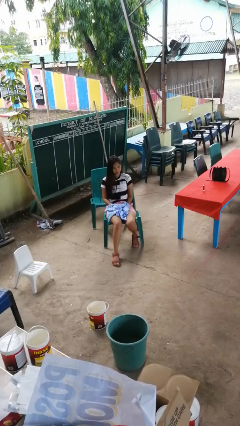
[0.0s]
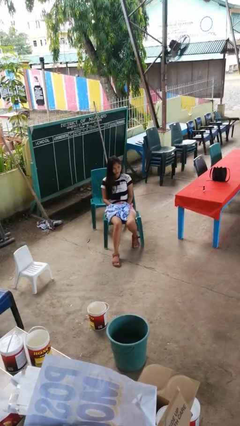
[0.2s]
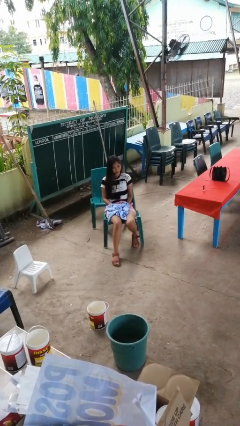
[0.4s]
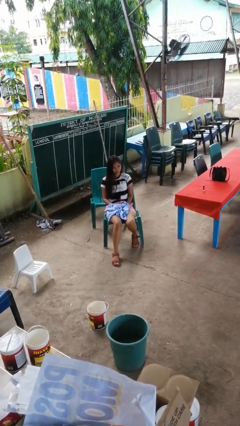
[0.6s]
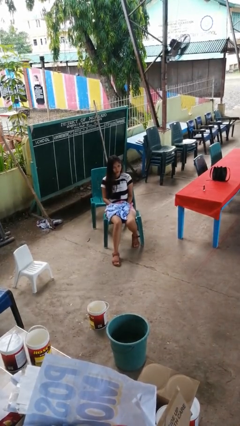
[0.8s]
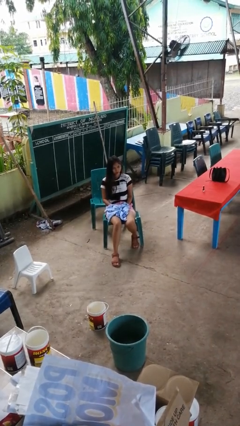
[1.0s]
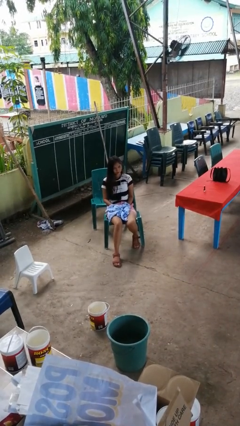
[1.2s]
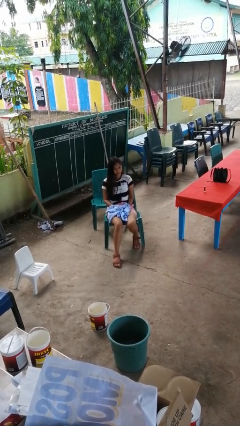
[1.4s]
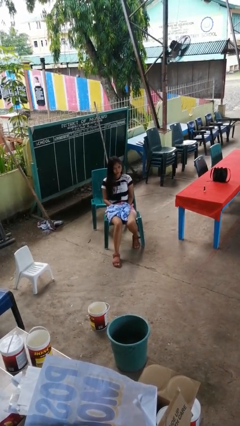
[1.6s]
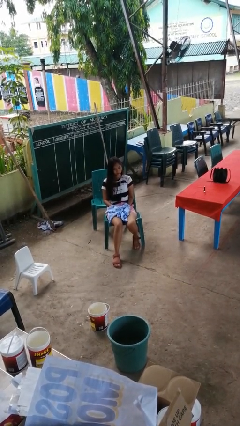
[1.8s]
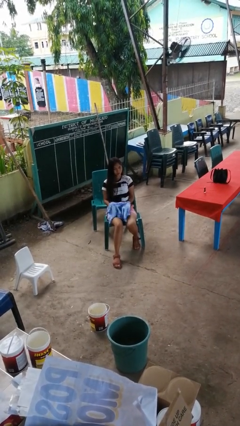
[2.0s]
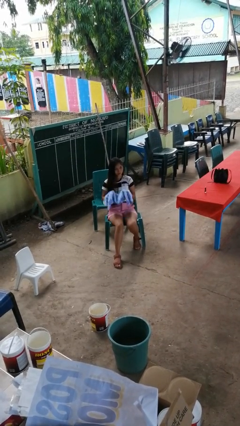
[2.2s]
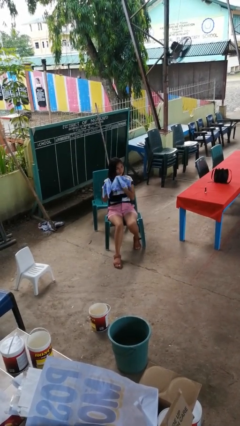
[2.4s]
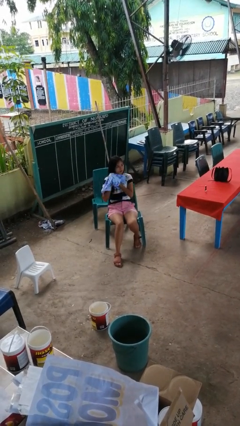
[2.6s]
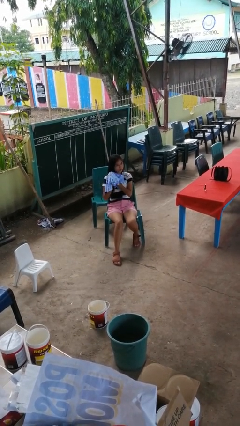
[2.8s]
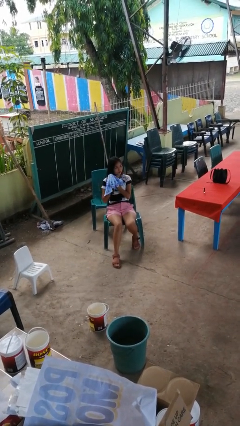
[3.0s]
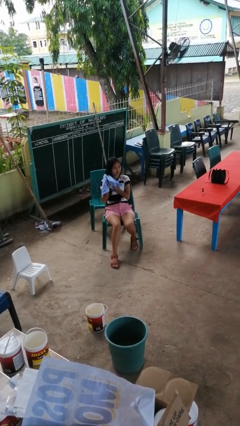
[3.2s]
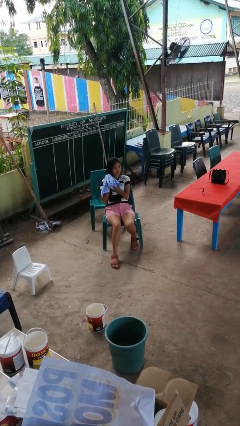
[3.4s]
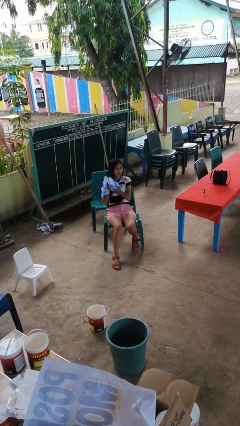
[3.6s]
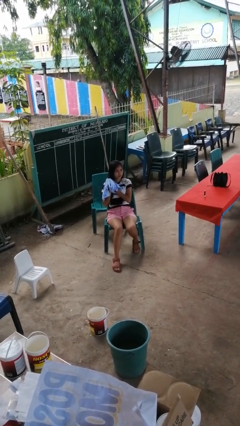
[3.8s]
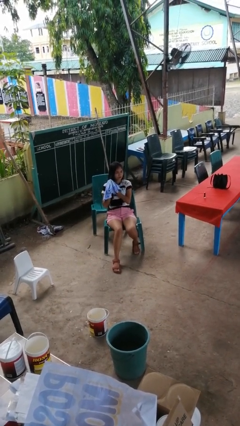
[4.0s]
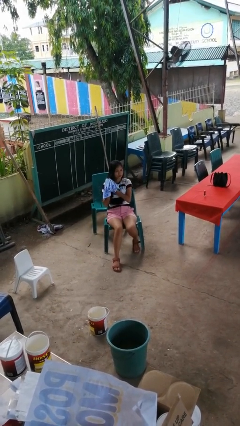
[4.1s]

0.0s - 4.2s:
person dries hair with towel

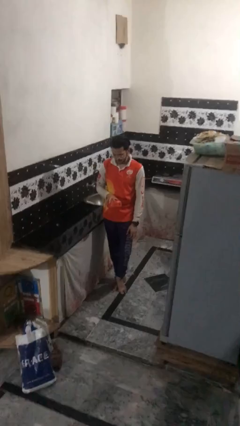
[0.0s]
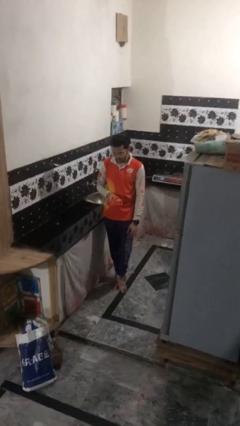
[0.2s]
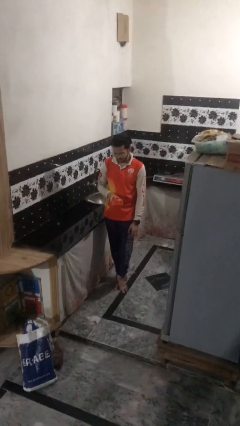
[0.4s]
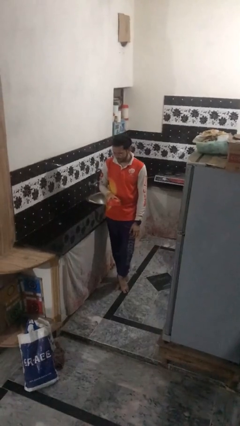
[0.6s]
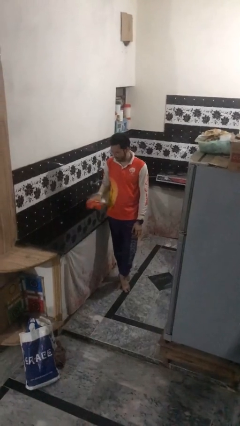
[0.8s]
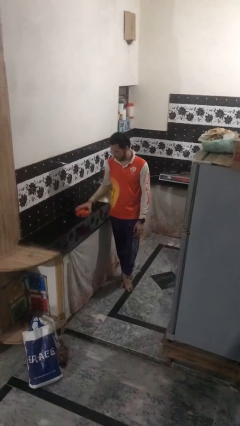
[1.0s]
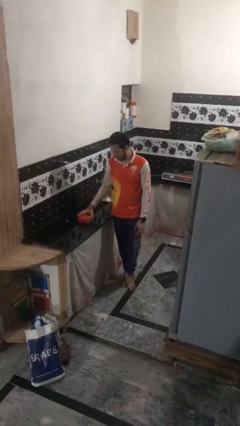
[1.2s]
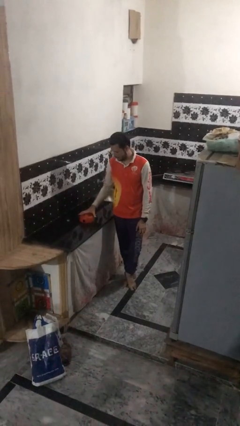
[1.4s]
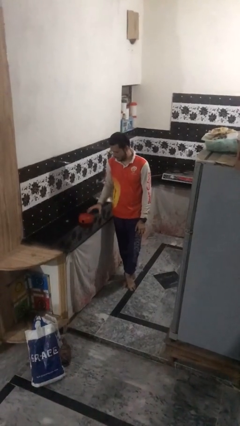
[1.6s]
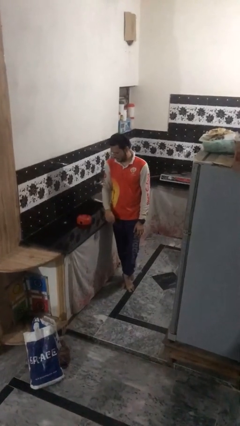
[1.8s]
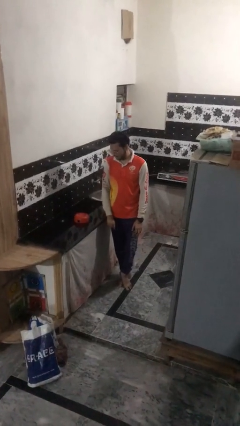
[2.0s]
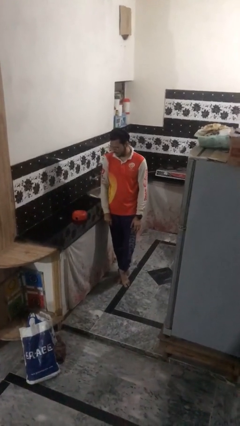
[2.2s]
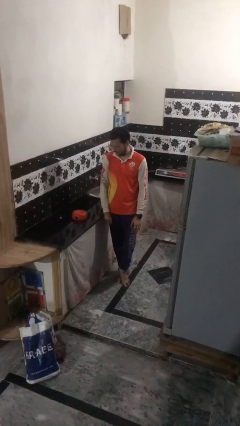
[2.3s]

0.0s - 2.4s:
person puts down object on countertop

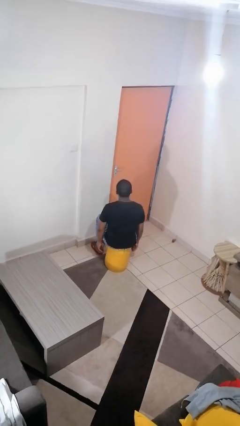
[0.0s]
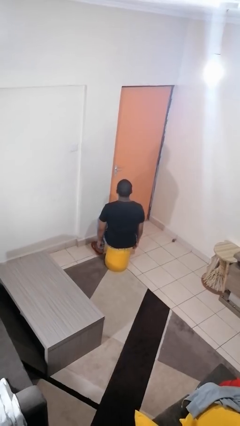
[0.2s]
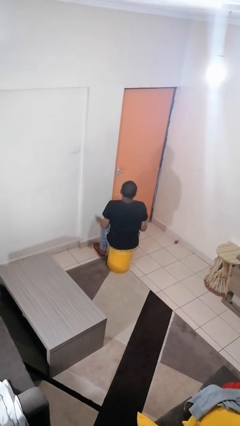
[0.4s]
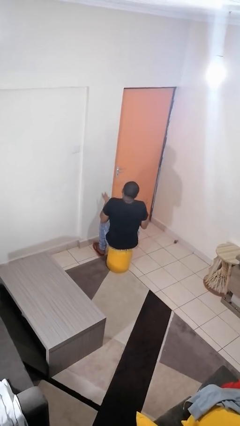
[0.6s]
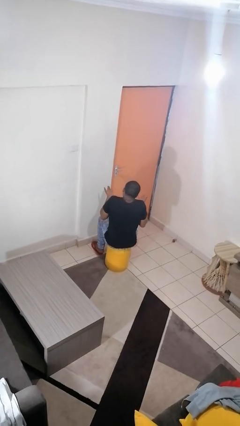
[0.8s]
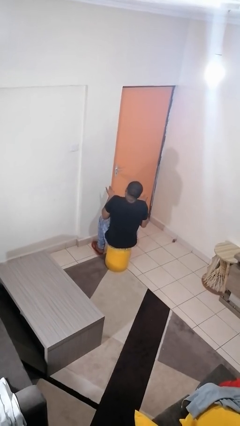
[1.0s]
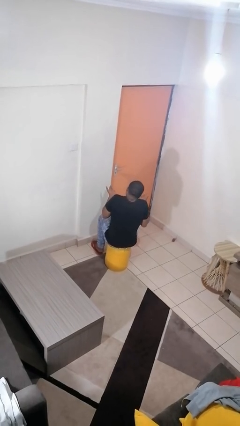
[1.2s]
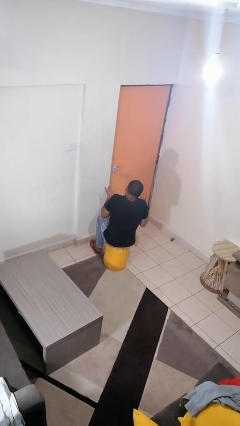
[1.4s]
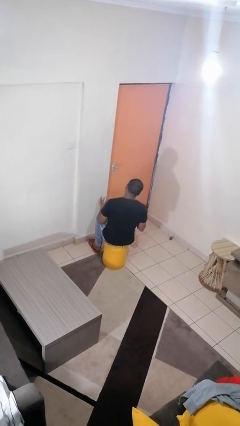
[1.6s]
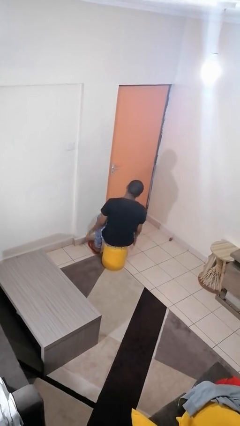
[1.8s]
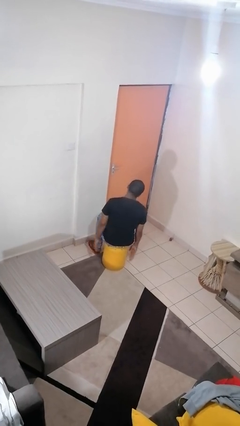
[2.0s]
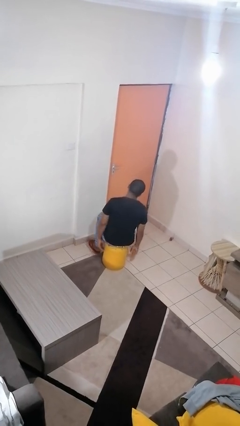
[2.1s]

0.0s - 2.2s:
person shrugs

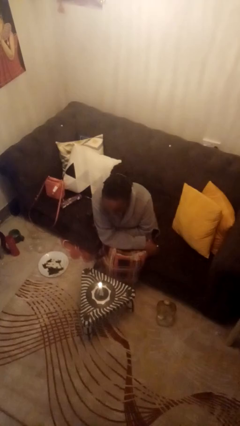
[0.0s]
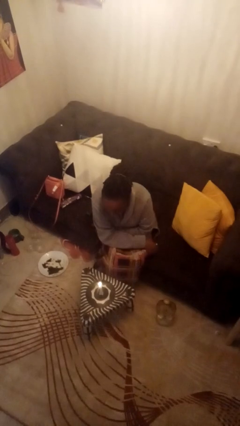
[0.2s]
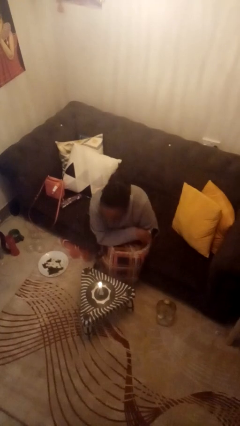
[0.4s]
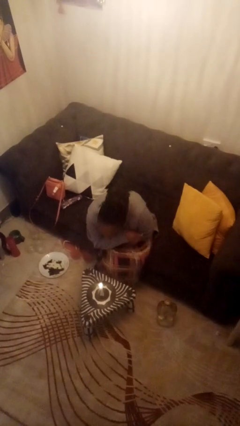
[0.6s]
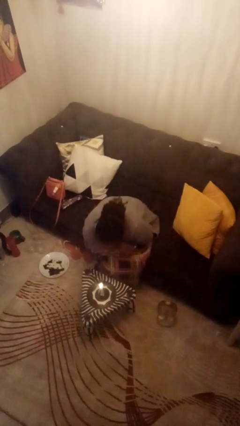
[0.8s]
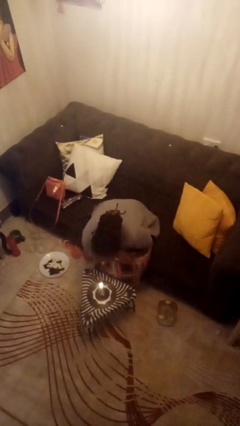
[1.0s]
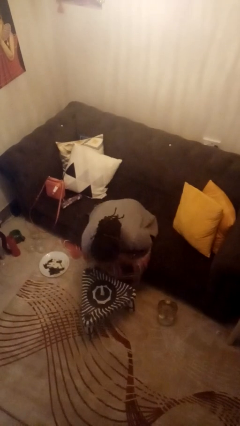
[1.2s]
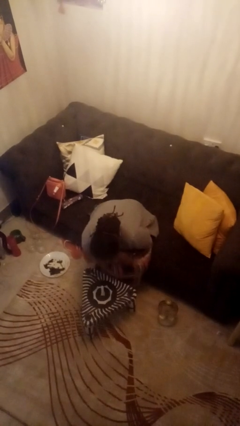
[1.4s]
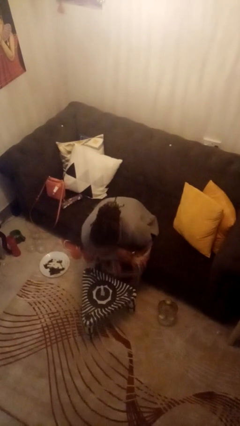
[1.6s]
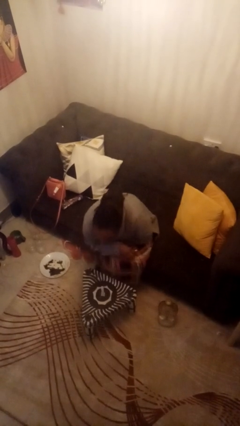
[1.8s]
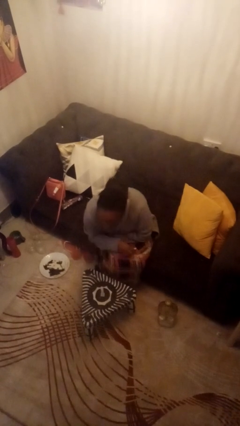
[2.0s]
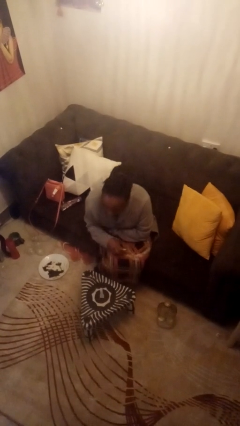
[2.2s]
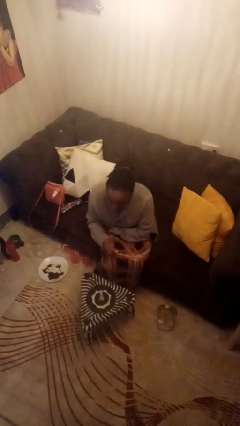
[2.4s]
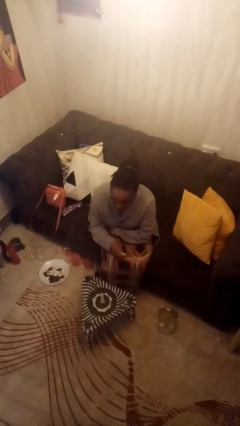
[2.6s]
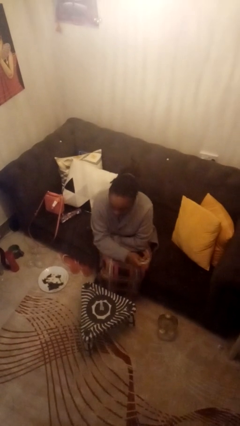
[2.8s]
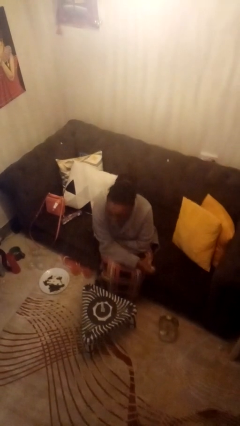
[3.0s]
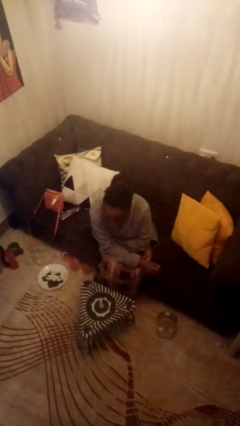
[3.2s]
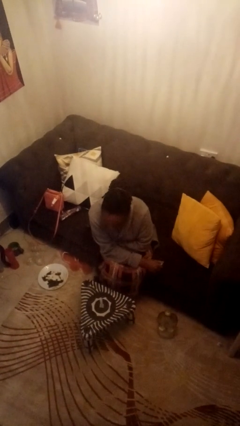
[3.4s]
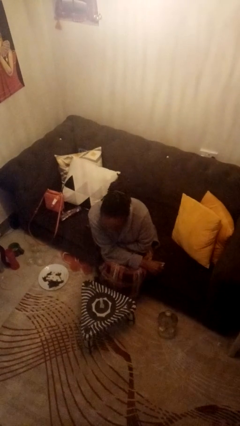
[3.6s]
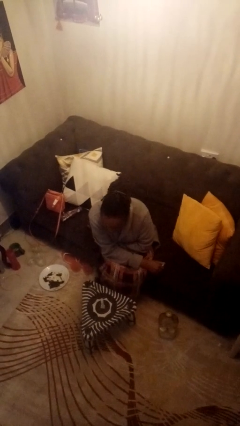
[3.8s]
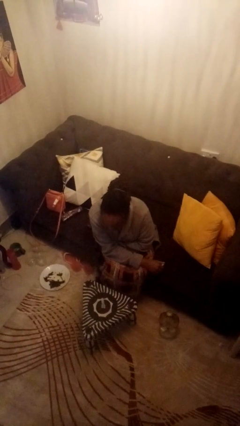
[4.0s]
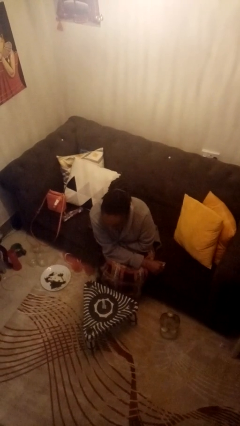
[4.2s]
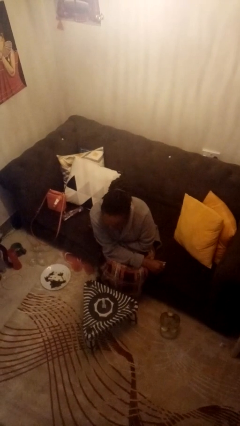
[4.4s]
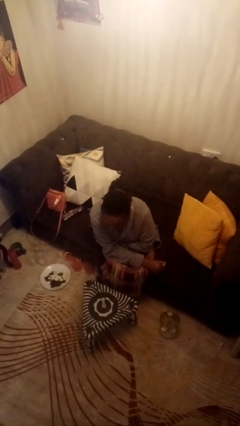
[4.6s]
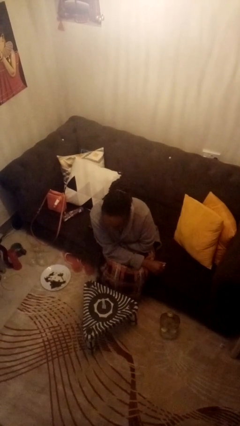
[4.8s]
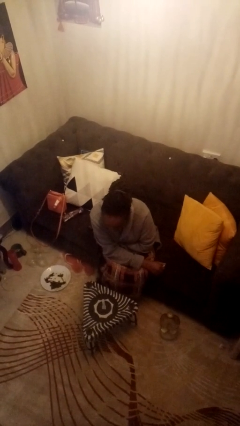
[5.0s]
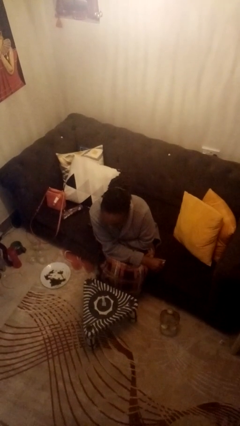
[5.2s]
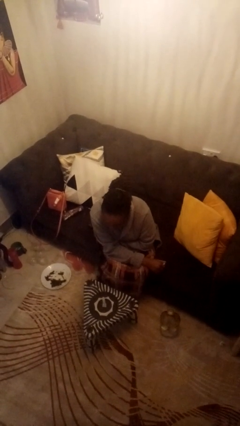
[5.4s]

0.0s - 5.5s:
person extinguishes candle

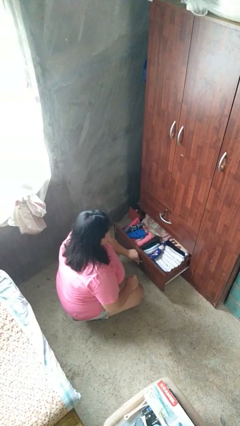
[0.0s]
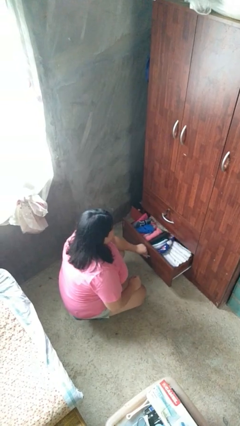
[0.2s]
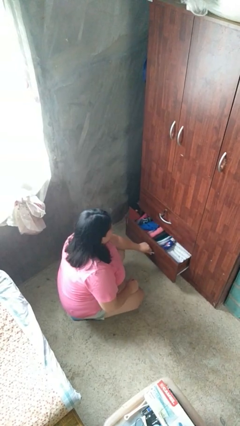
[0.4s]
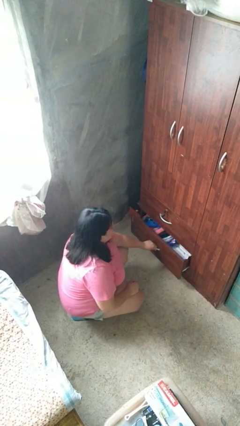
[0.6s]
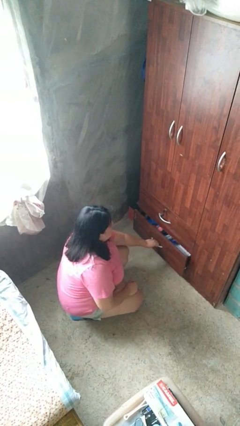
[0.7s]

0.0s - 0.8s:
person closes dresser drawer

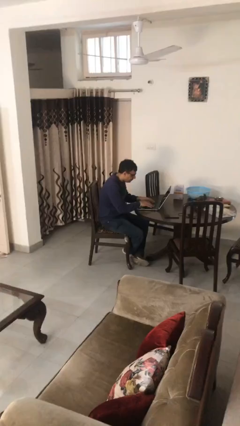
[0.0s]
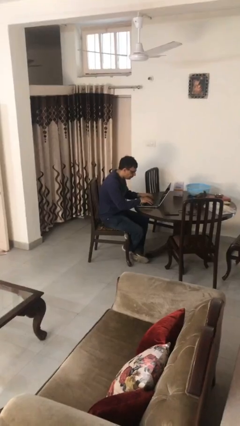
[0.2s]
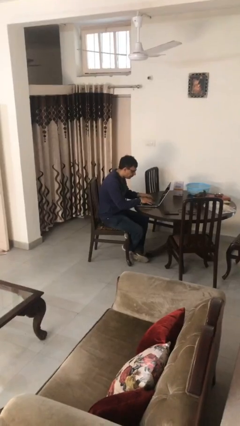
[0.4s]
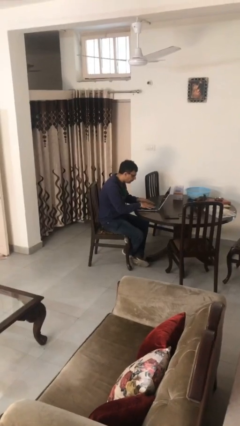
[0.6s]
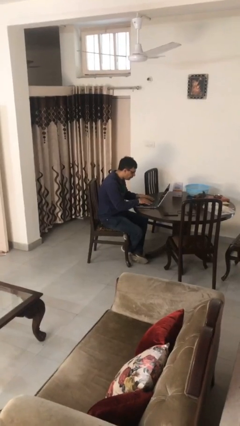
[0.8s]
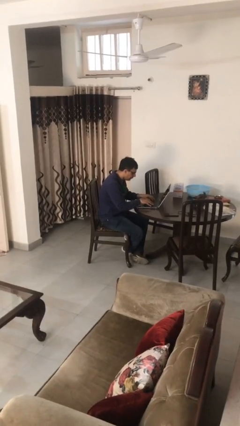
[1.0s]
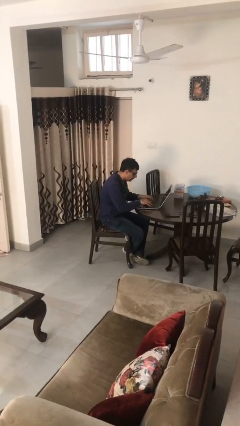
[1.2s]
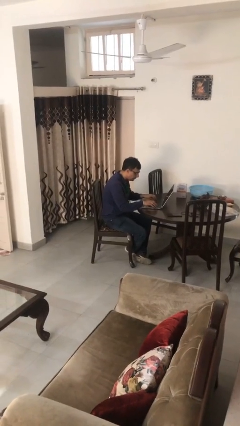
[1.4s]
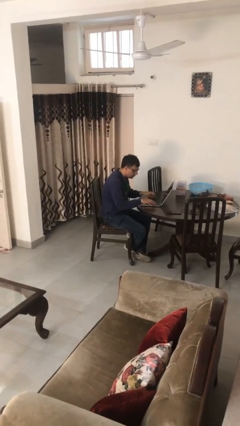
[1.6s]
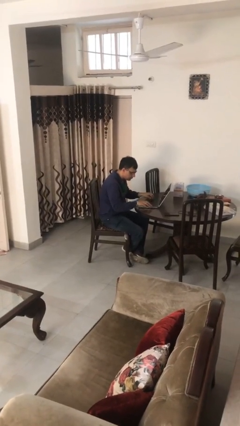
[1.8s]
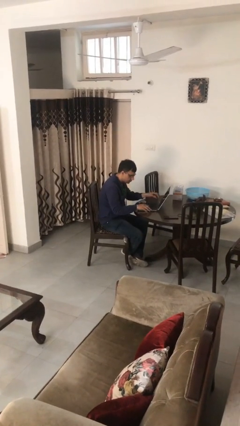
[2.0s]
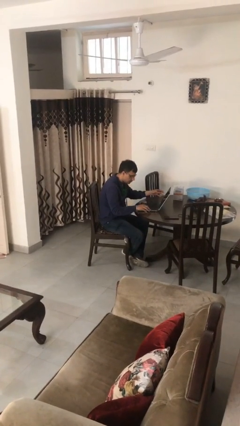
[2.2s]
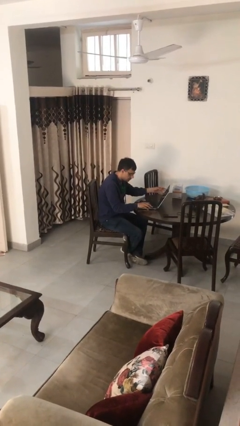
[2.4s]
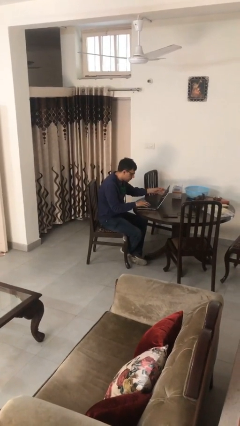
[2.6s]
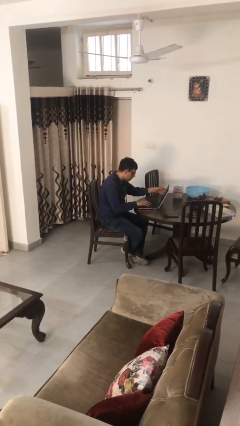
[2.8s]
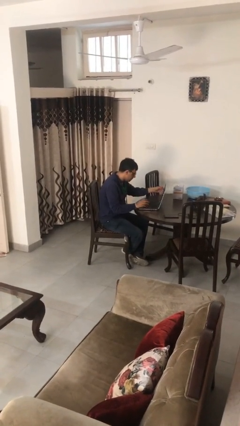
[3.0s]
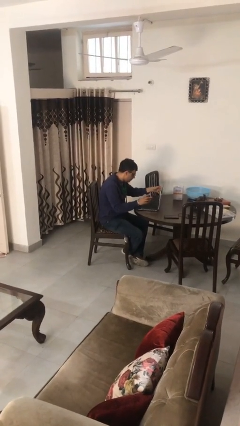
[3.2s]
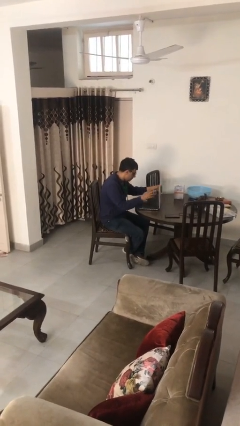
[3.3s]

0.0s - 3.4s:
person interacts with laptop
